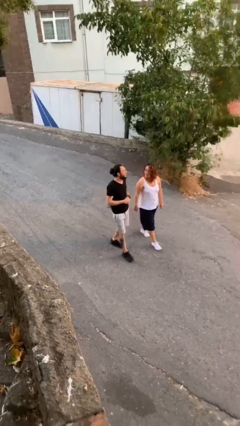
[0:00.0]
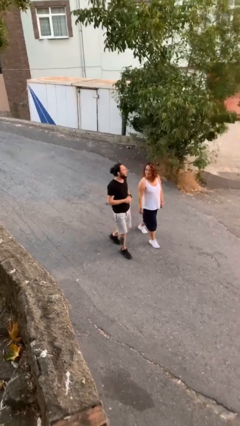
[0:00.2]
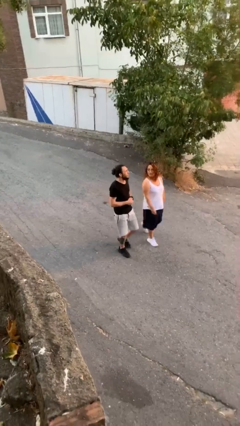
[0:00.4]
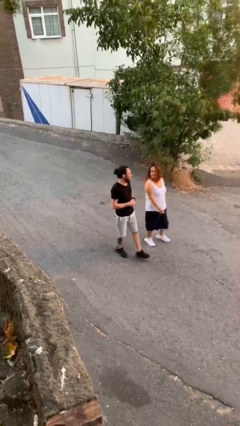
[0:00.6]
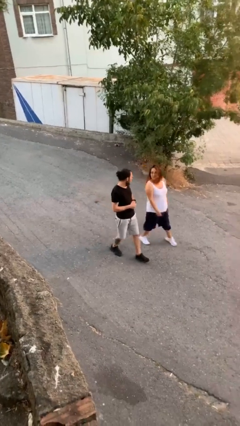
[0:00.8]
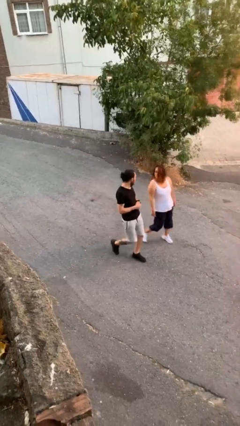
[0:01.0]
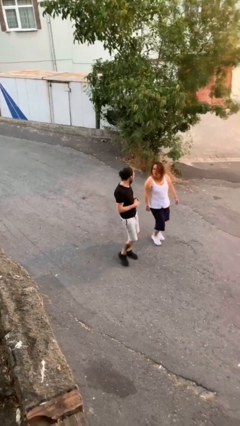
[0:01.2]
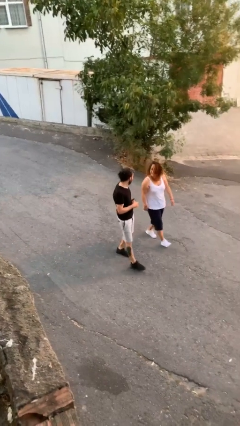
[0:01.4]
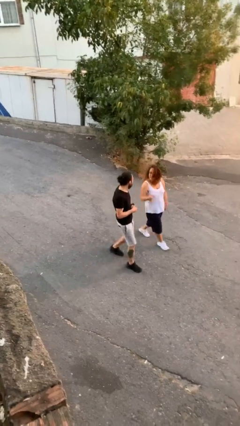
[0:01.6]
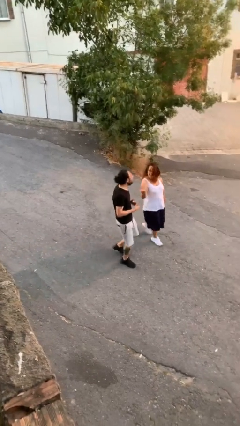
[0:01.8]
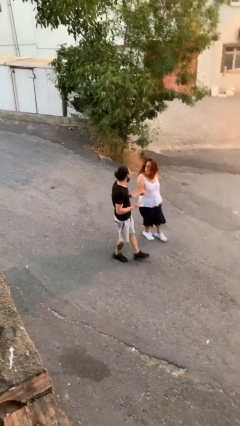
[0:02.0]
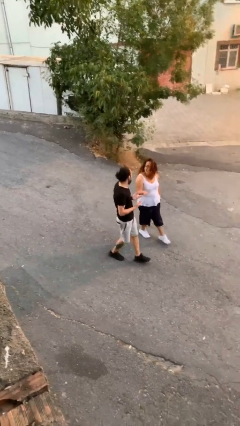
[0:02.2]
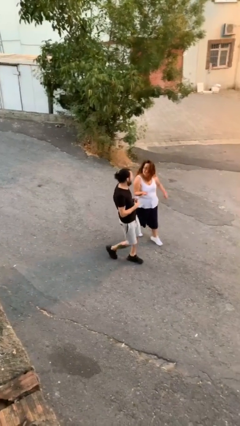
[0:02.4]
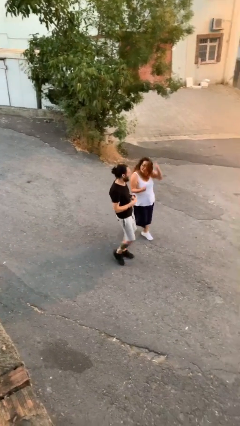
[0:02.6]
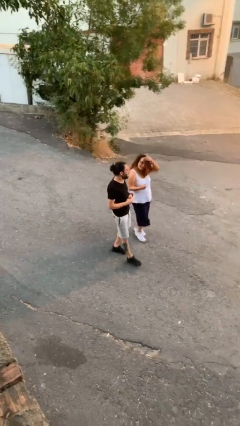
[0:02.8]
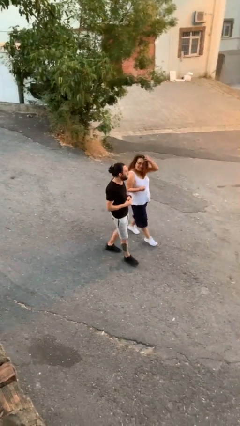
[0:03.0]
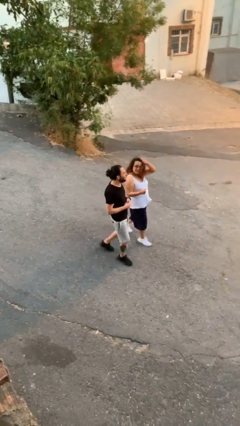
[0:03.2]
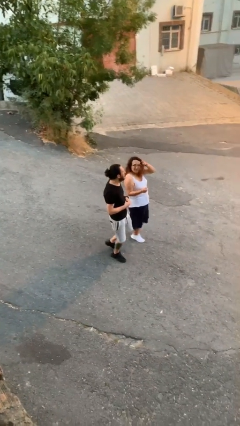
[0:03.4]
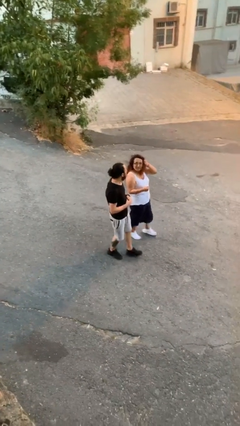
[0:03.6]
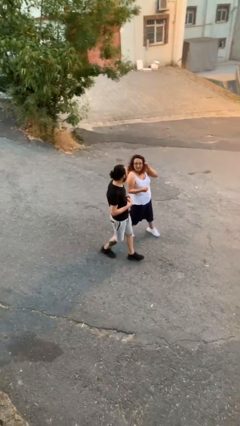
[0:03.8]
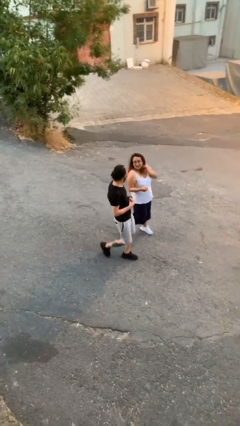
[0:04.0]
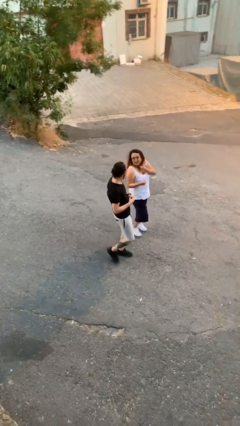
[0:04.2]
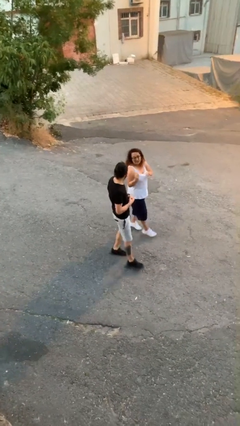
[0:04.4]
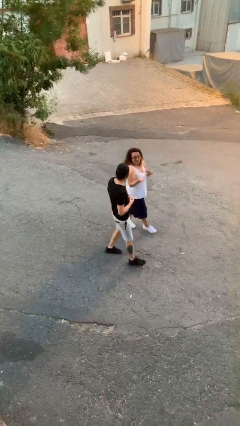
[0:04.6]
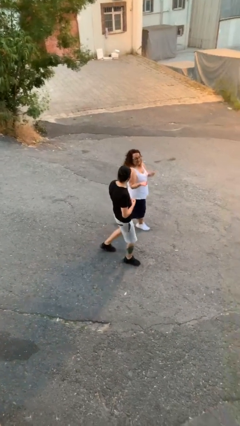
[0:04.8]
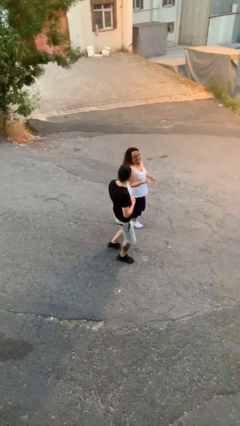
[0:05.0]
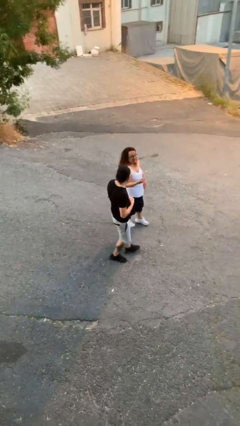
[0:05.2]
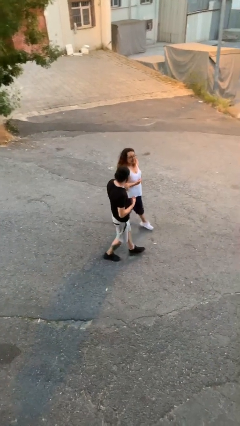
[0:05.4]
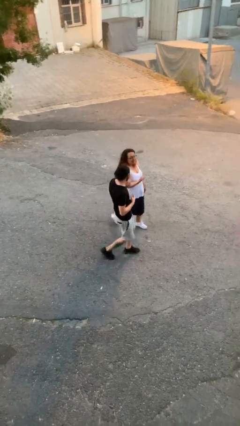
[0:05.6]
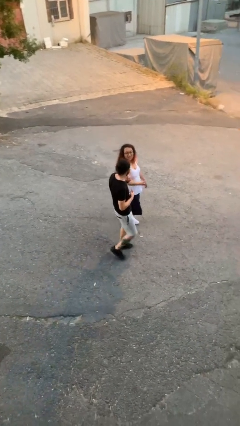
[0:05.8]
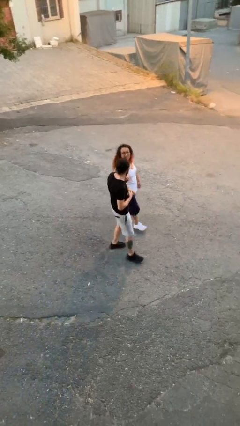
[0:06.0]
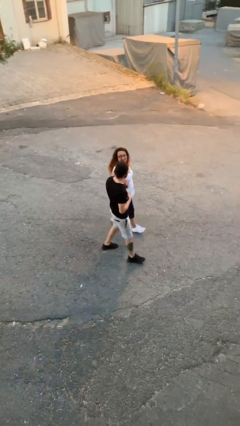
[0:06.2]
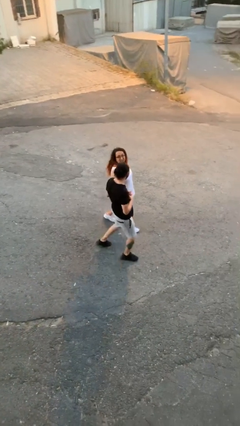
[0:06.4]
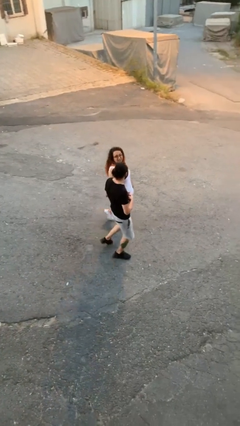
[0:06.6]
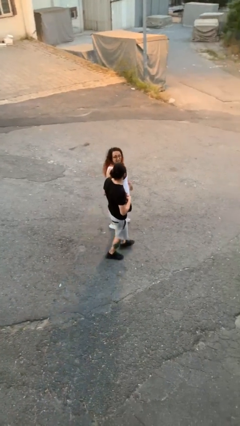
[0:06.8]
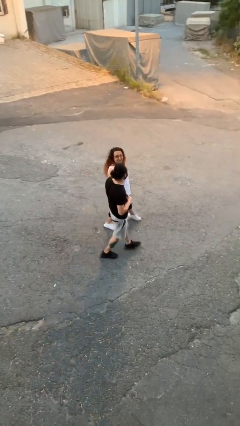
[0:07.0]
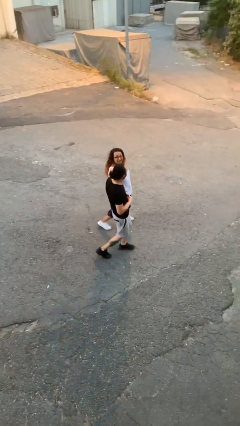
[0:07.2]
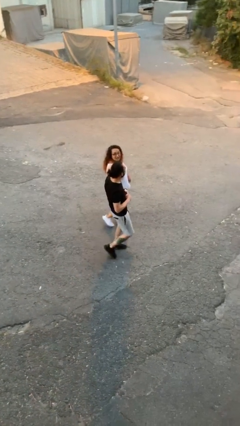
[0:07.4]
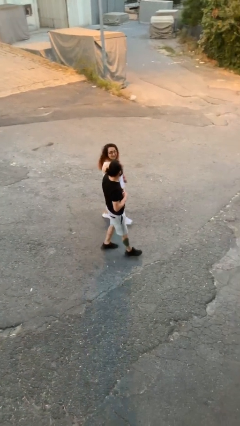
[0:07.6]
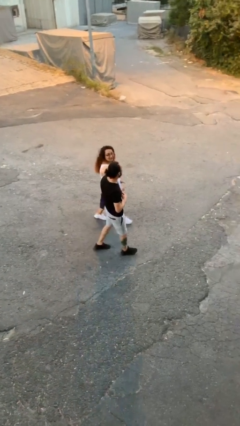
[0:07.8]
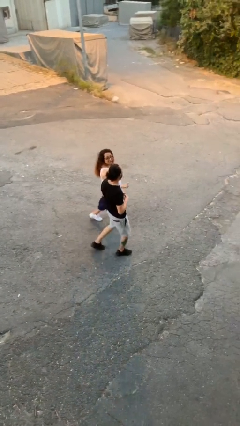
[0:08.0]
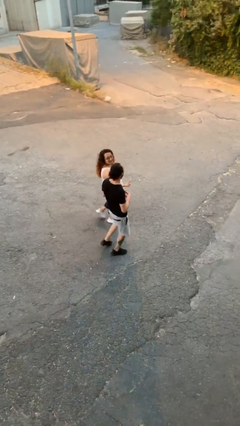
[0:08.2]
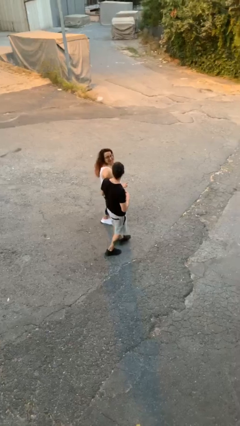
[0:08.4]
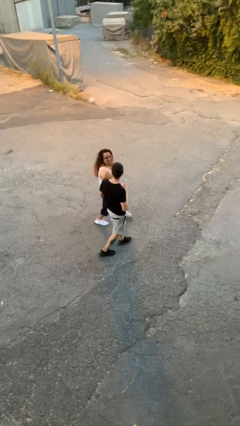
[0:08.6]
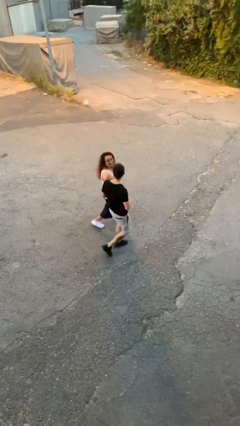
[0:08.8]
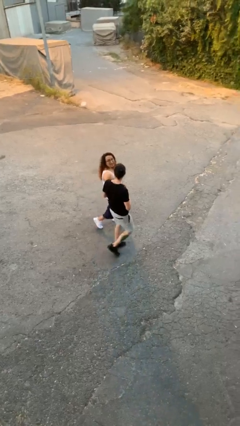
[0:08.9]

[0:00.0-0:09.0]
person talks to person

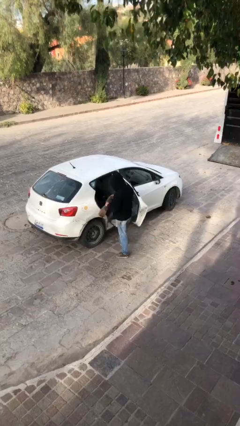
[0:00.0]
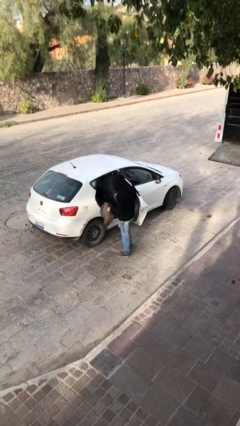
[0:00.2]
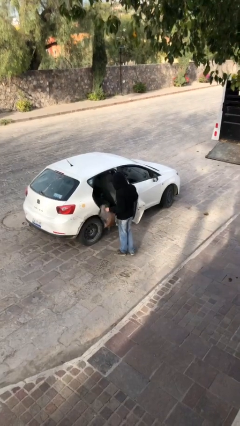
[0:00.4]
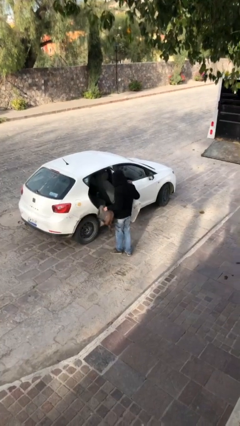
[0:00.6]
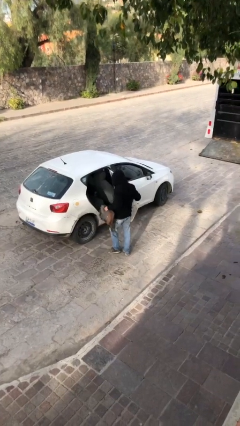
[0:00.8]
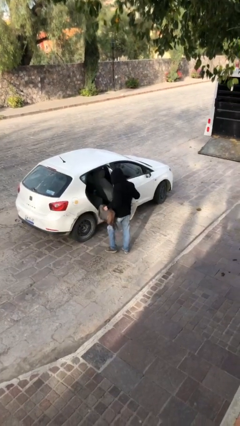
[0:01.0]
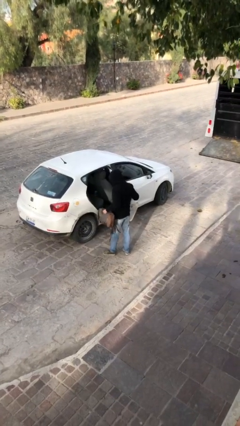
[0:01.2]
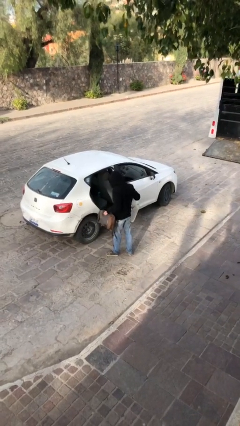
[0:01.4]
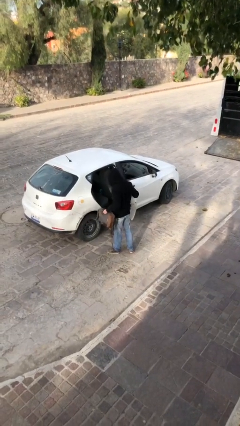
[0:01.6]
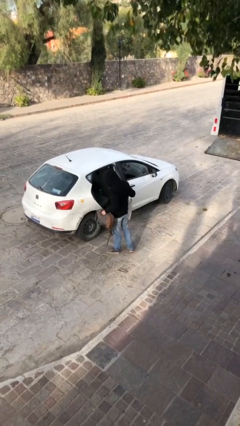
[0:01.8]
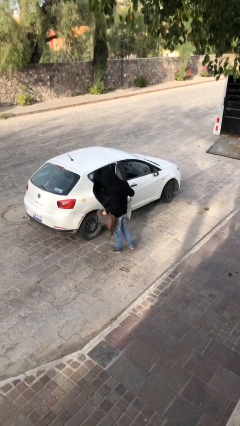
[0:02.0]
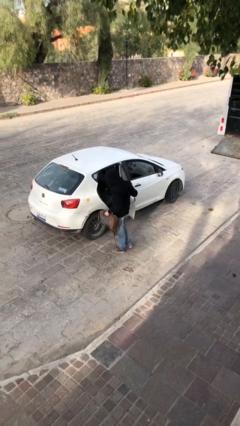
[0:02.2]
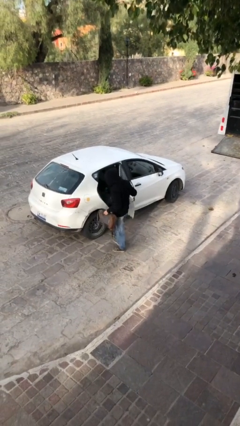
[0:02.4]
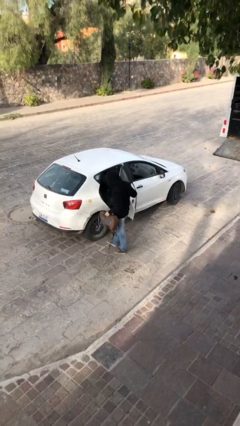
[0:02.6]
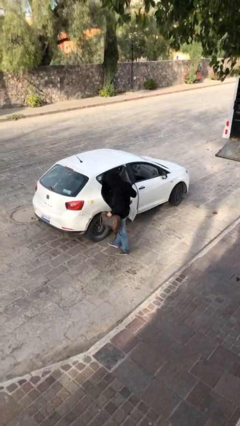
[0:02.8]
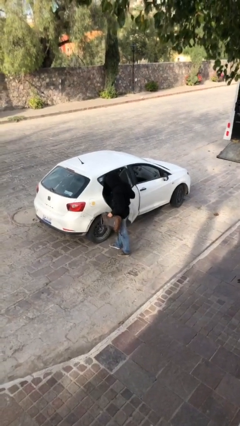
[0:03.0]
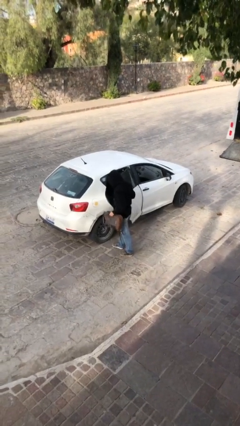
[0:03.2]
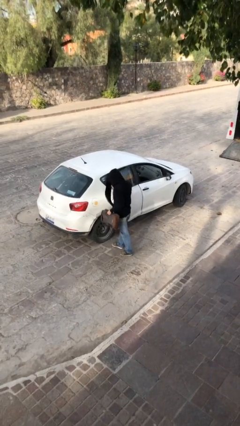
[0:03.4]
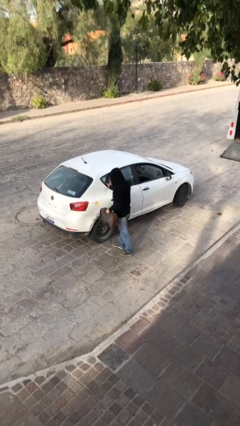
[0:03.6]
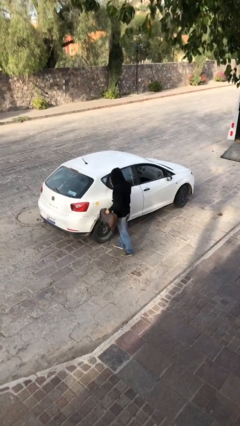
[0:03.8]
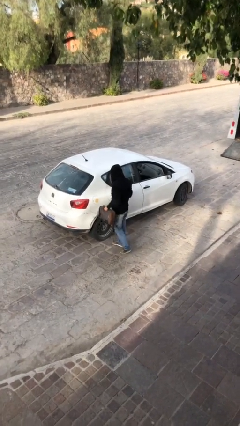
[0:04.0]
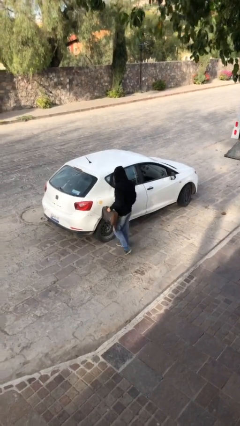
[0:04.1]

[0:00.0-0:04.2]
person closes car door

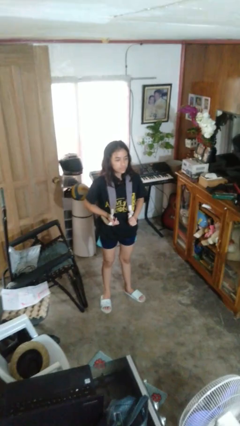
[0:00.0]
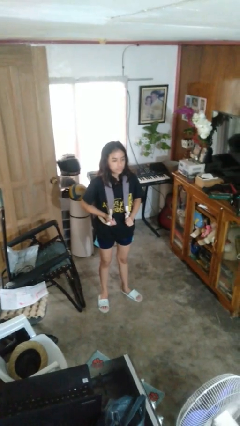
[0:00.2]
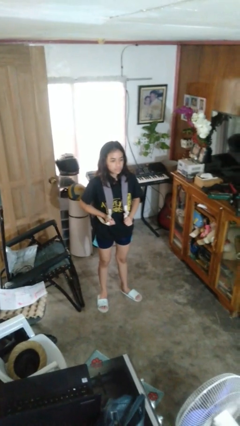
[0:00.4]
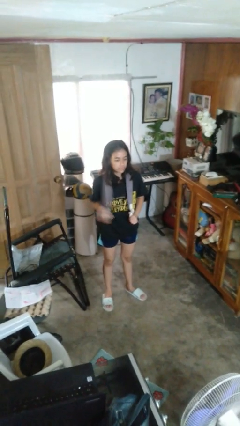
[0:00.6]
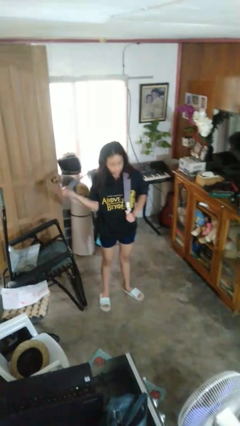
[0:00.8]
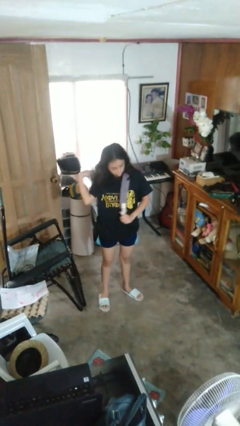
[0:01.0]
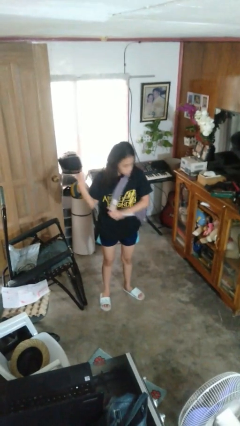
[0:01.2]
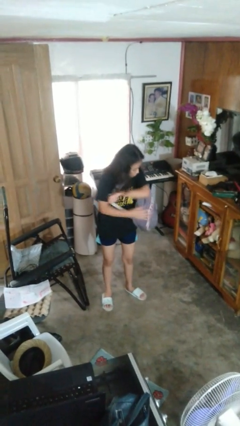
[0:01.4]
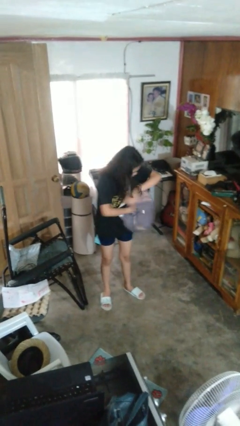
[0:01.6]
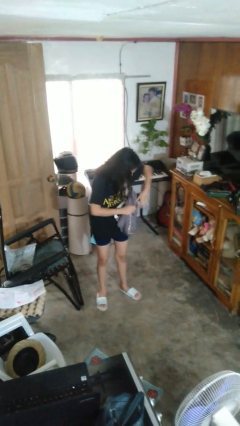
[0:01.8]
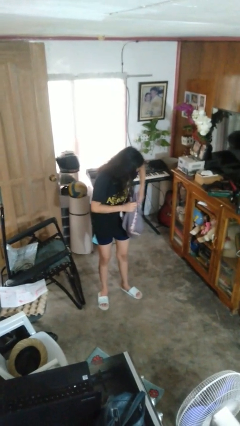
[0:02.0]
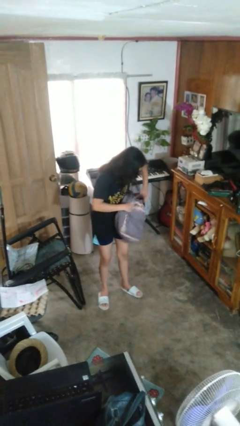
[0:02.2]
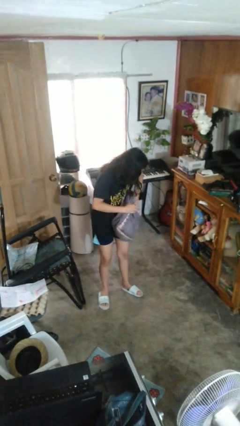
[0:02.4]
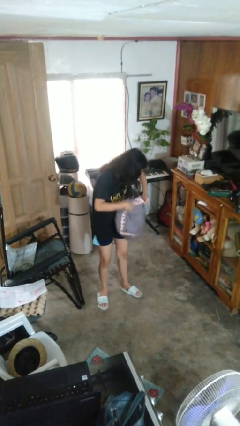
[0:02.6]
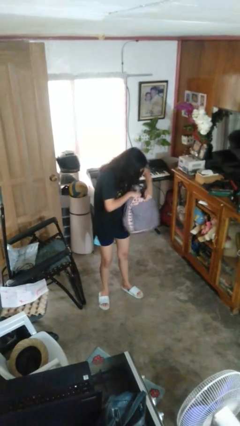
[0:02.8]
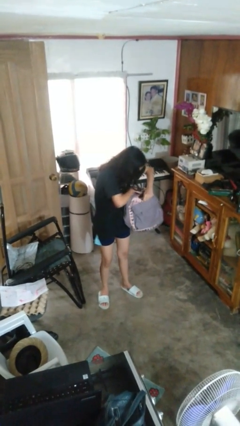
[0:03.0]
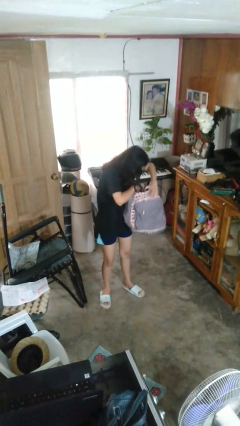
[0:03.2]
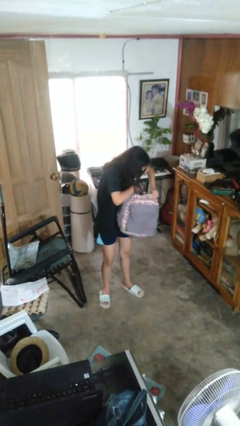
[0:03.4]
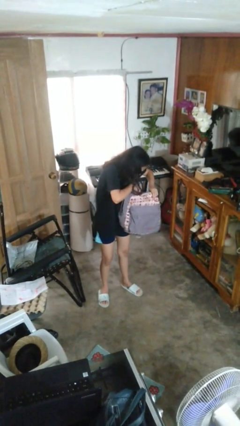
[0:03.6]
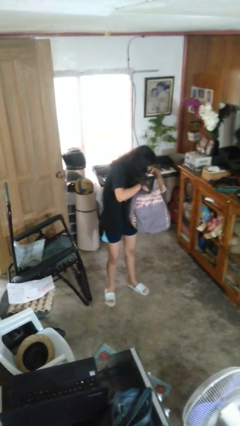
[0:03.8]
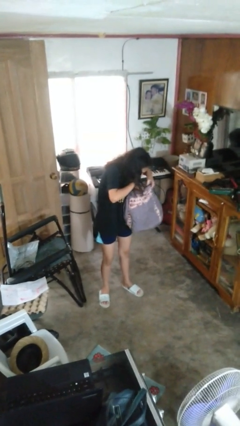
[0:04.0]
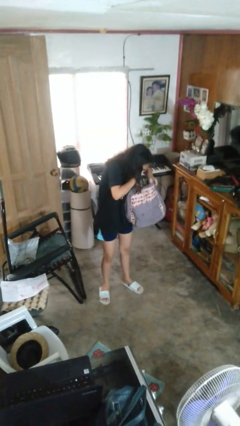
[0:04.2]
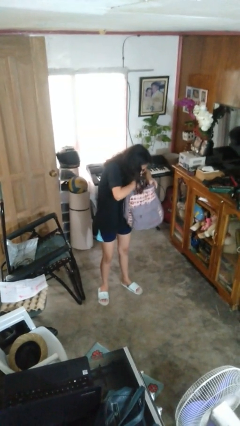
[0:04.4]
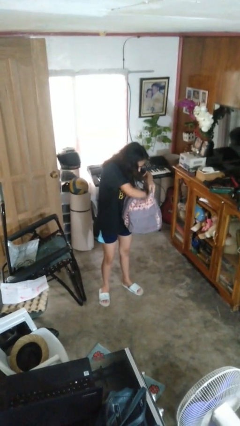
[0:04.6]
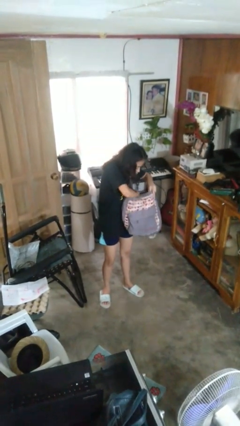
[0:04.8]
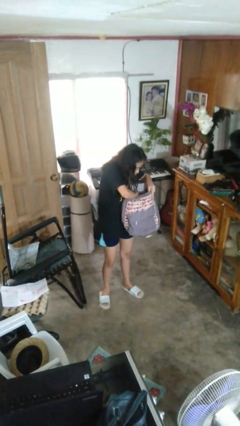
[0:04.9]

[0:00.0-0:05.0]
person searches in backpack
